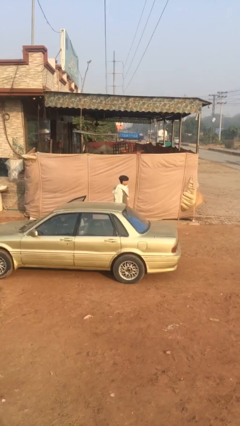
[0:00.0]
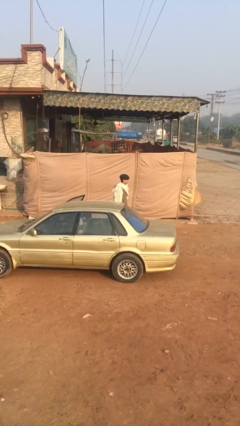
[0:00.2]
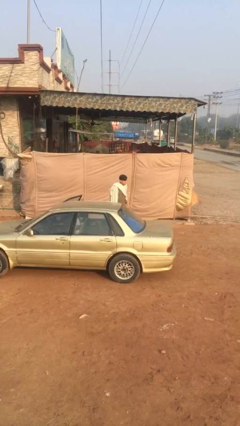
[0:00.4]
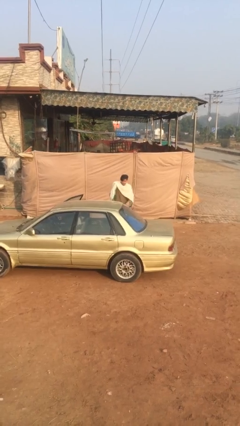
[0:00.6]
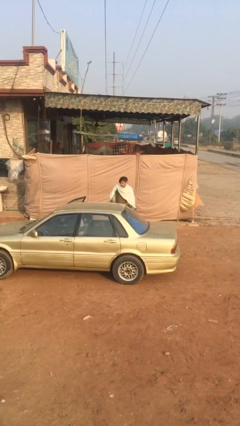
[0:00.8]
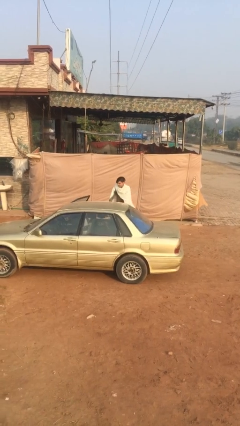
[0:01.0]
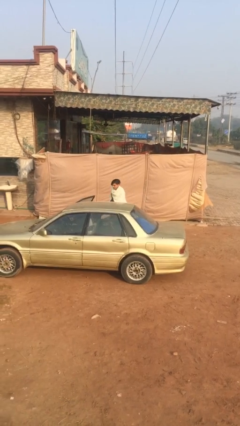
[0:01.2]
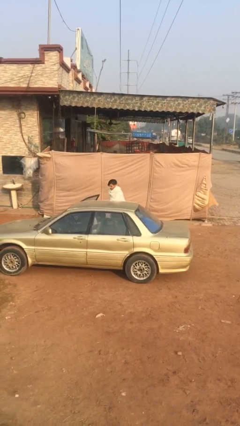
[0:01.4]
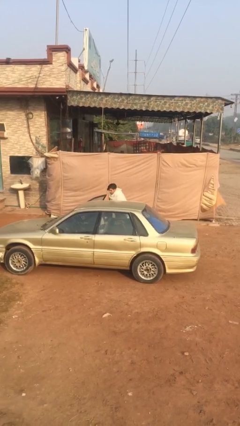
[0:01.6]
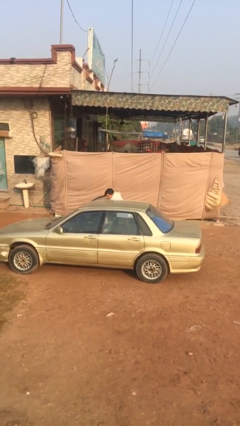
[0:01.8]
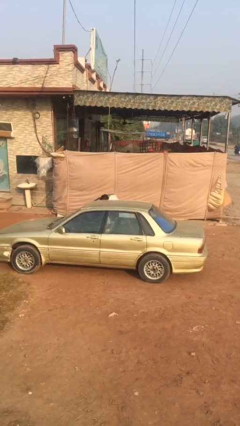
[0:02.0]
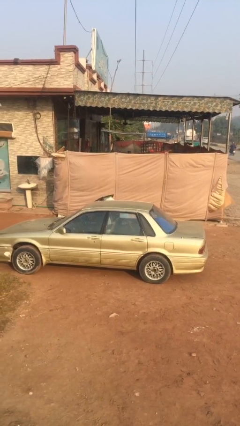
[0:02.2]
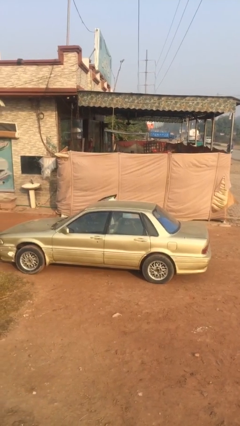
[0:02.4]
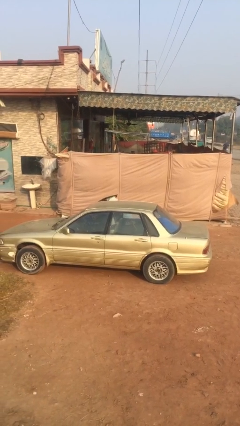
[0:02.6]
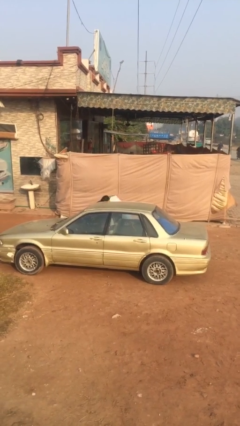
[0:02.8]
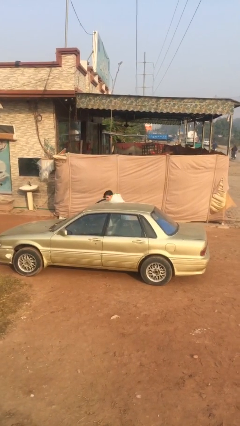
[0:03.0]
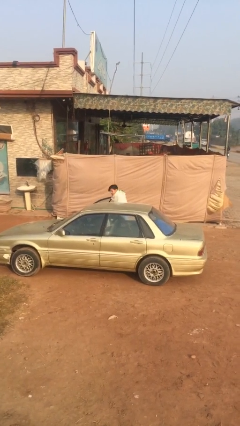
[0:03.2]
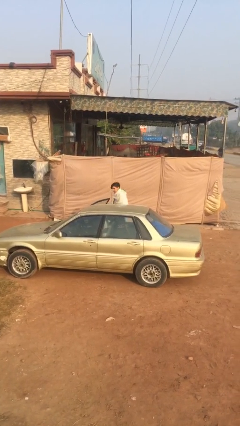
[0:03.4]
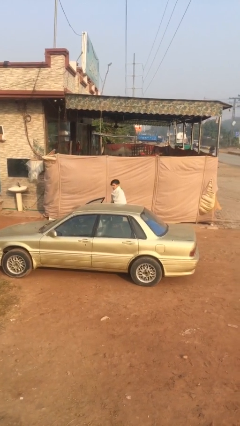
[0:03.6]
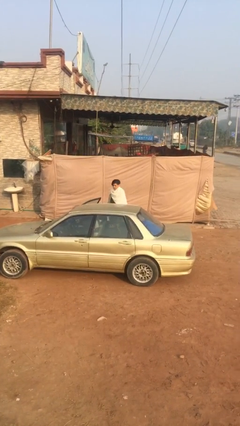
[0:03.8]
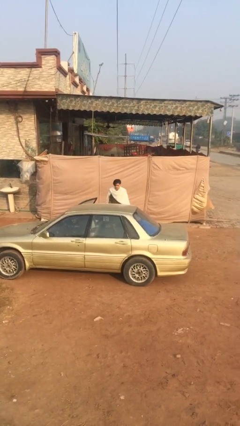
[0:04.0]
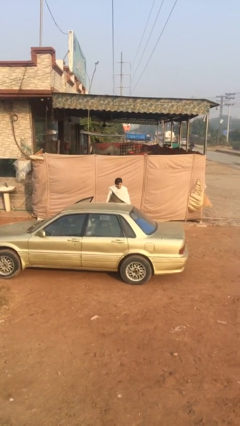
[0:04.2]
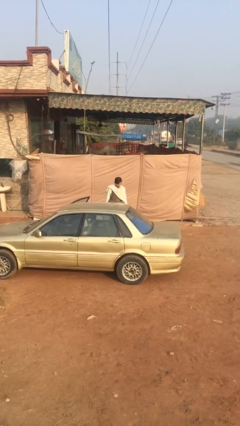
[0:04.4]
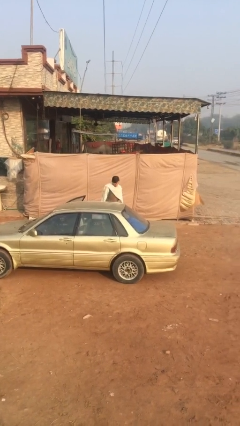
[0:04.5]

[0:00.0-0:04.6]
person loads car

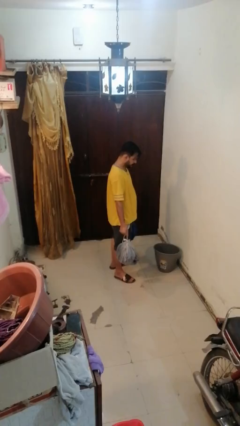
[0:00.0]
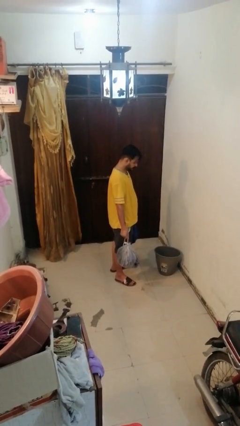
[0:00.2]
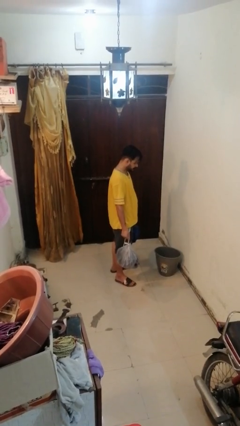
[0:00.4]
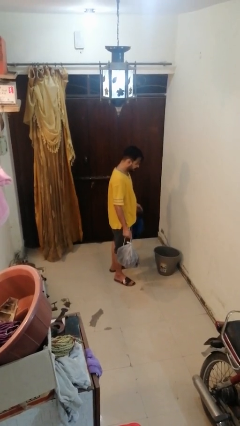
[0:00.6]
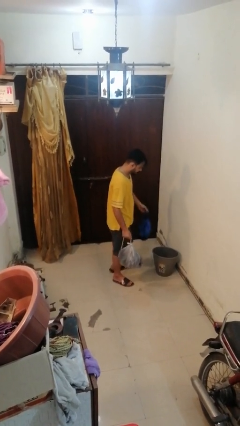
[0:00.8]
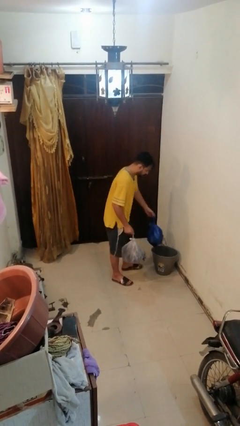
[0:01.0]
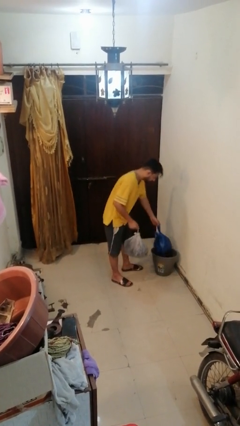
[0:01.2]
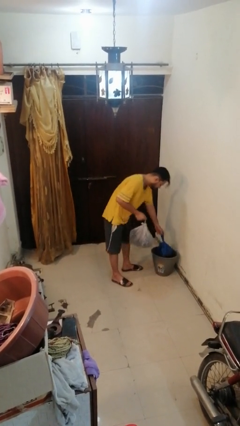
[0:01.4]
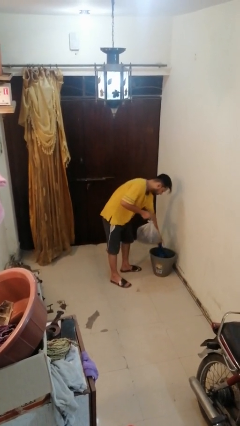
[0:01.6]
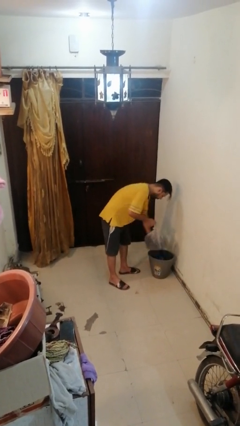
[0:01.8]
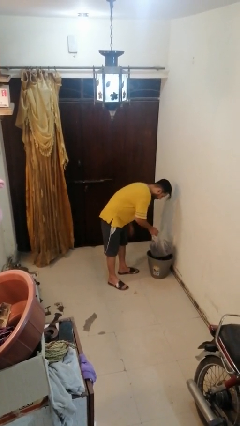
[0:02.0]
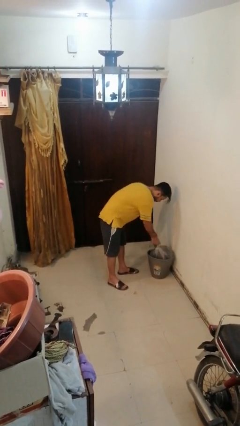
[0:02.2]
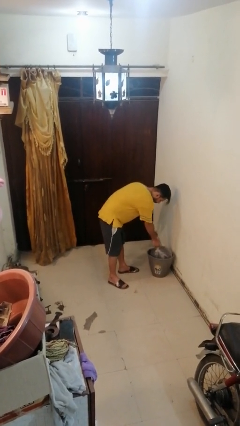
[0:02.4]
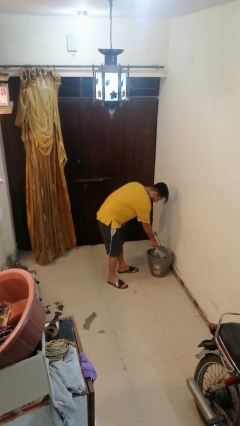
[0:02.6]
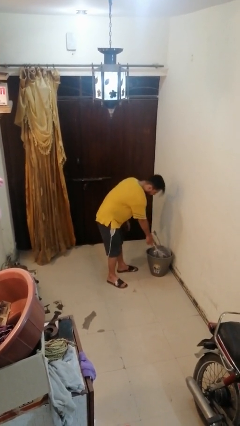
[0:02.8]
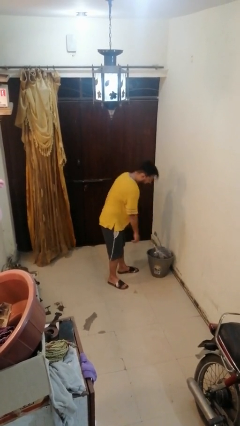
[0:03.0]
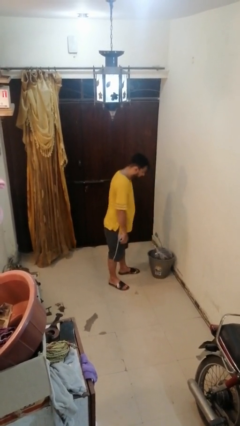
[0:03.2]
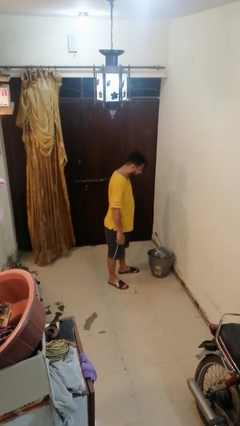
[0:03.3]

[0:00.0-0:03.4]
person discards trash

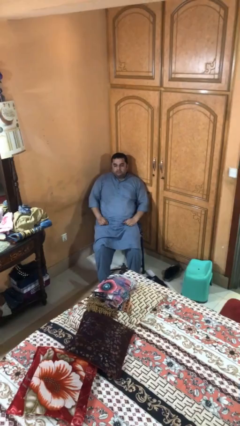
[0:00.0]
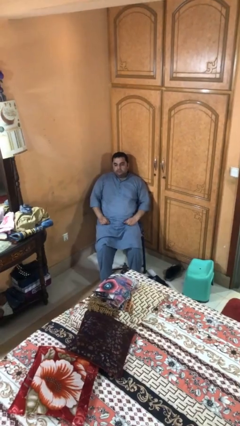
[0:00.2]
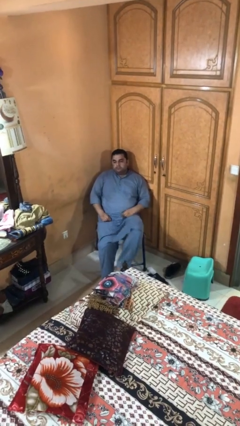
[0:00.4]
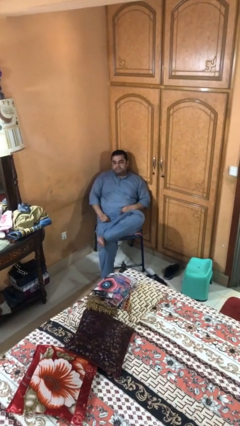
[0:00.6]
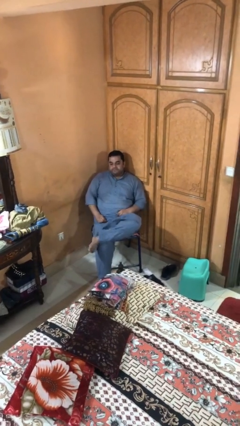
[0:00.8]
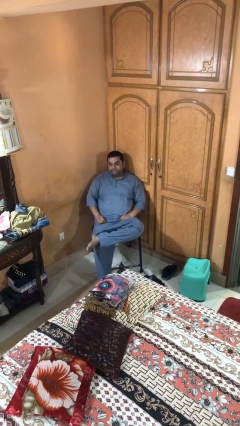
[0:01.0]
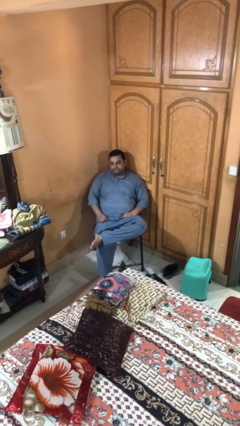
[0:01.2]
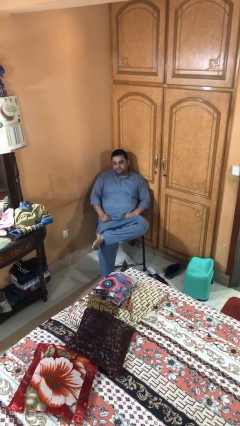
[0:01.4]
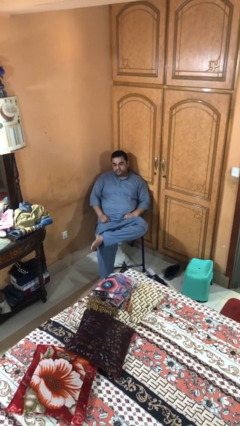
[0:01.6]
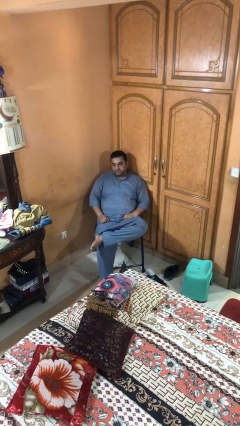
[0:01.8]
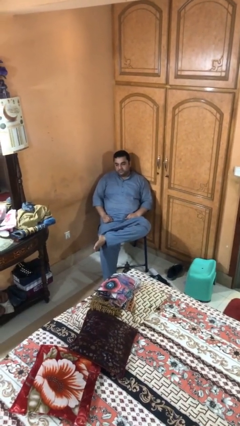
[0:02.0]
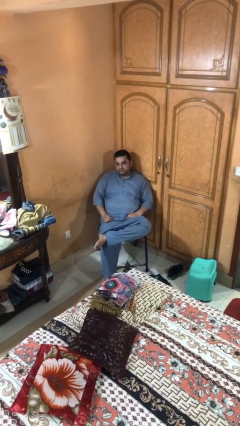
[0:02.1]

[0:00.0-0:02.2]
person crosses legs

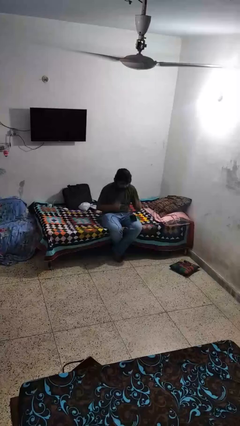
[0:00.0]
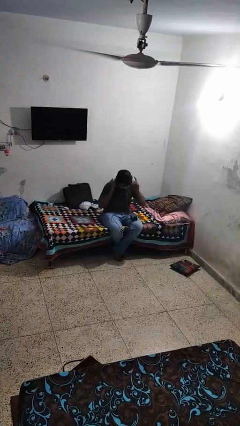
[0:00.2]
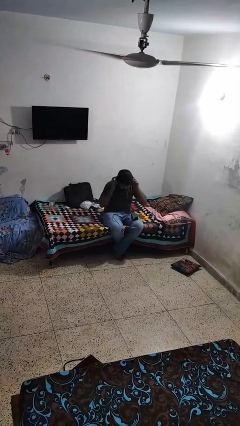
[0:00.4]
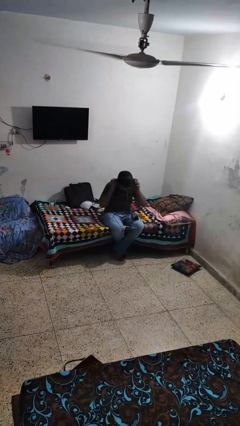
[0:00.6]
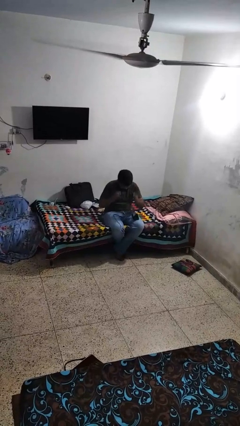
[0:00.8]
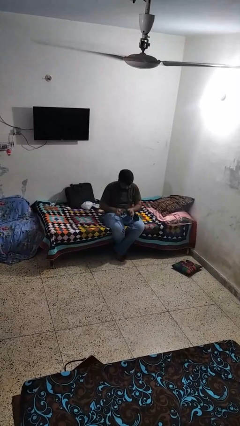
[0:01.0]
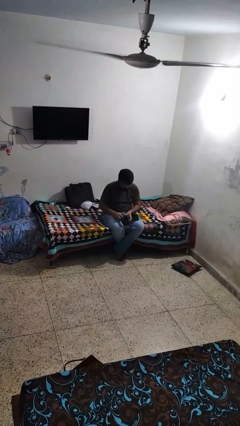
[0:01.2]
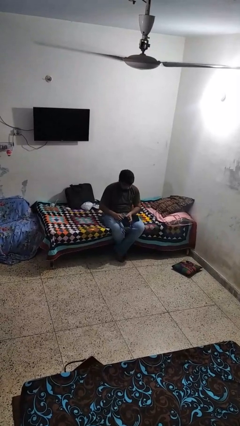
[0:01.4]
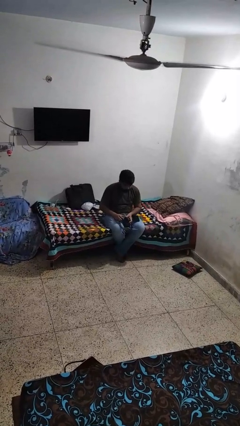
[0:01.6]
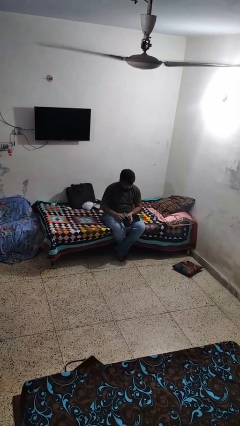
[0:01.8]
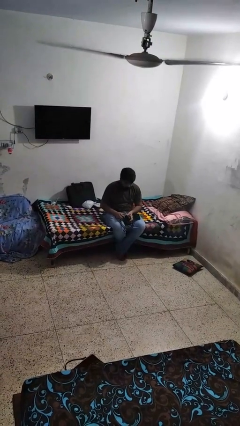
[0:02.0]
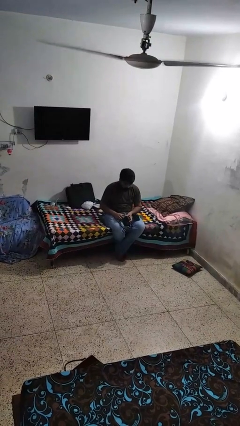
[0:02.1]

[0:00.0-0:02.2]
person takes off headphones

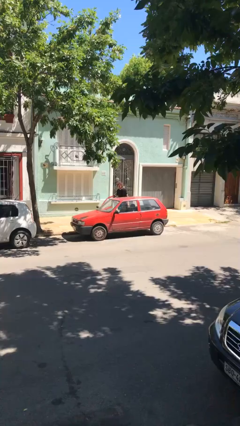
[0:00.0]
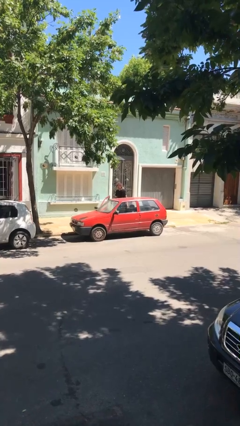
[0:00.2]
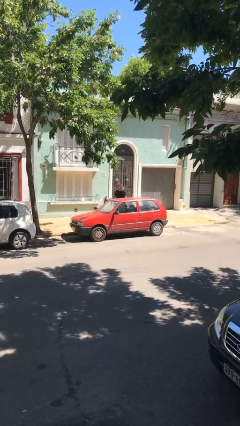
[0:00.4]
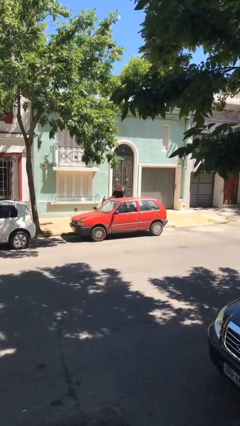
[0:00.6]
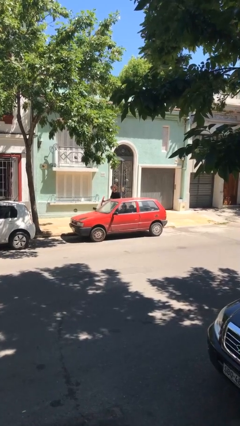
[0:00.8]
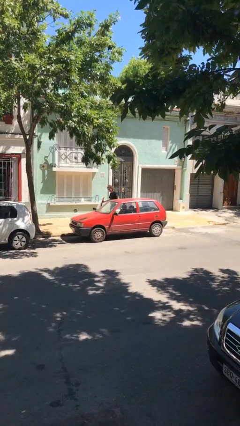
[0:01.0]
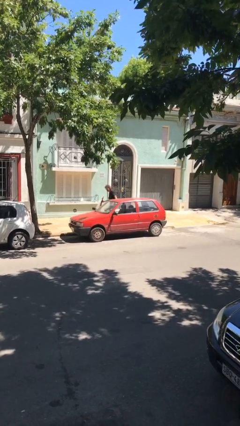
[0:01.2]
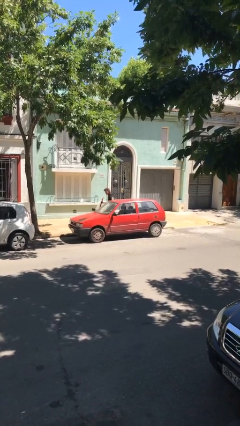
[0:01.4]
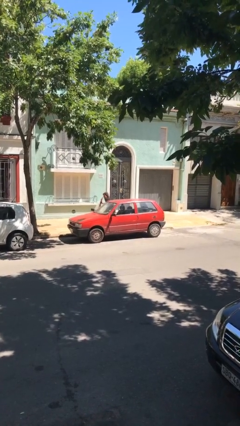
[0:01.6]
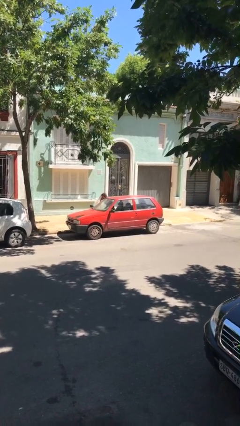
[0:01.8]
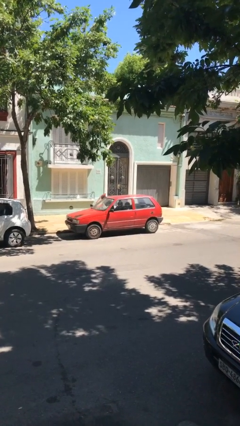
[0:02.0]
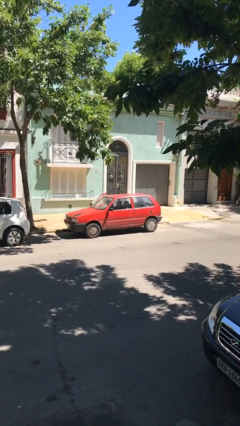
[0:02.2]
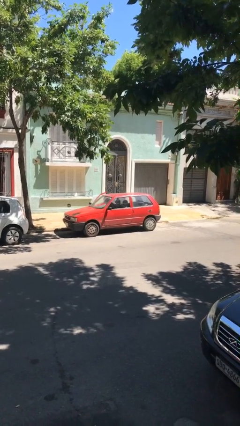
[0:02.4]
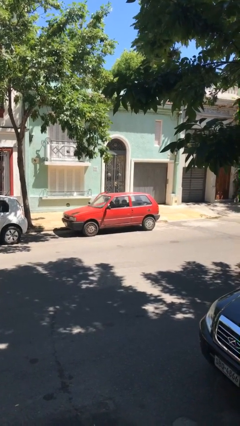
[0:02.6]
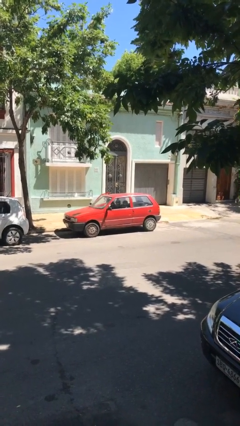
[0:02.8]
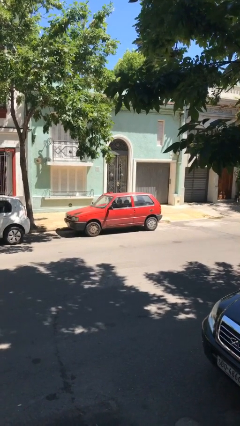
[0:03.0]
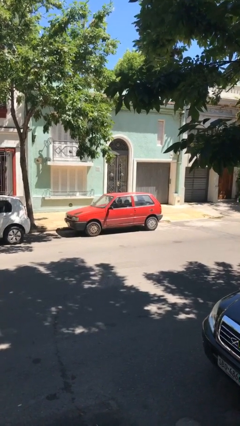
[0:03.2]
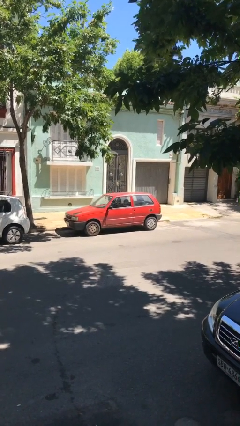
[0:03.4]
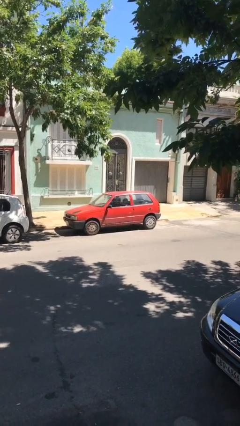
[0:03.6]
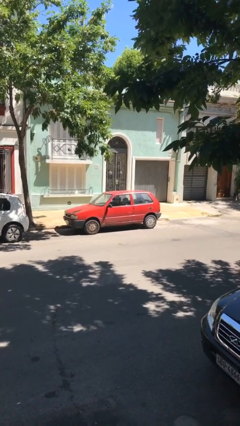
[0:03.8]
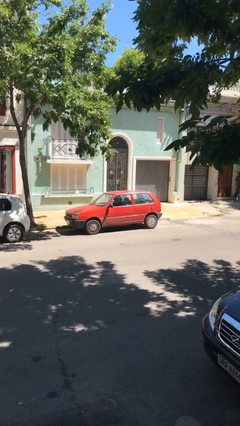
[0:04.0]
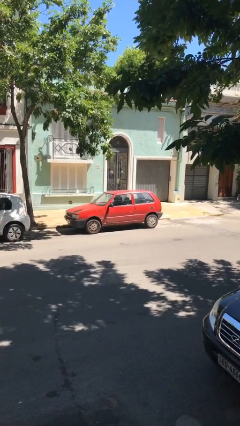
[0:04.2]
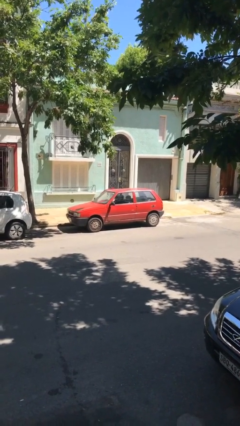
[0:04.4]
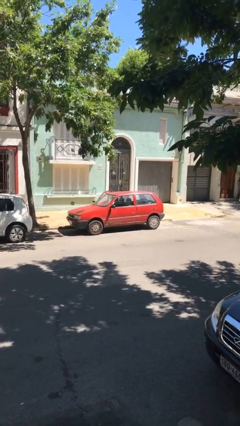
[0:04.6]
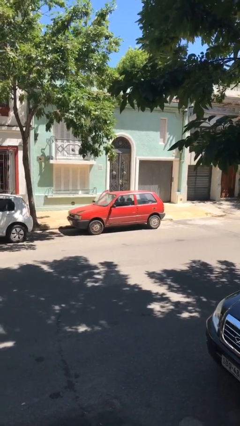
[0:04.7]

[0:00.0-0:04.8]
car picks up person

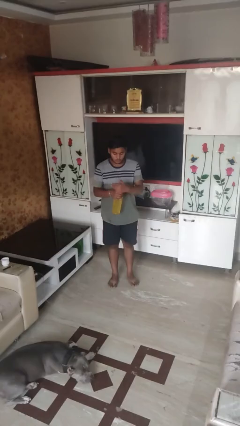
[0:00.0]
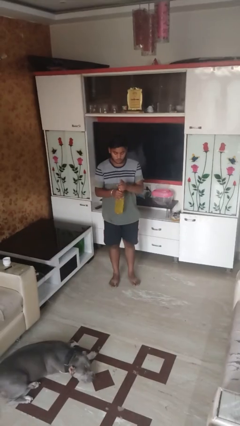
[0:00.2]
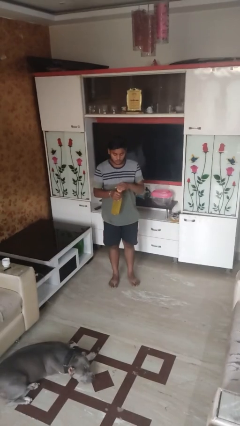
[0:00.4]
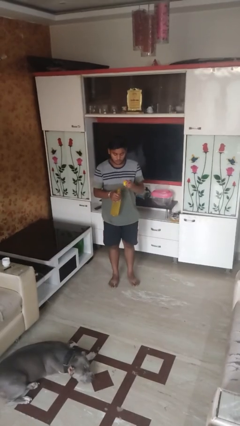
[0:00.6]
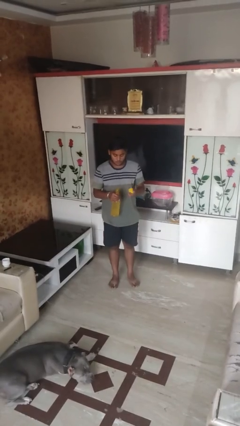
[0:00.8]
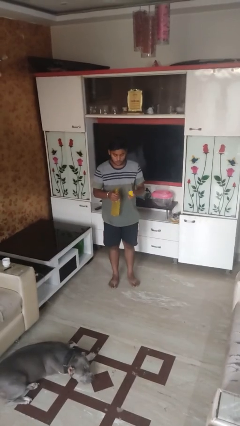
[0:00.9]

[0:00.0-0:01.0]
person unscrews lid from bottle
